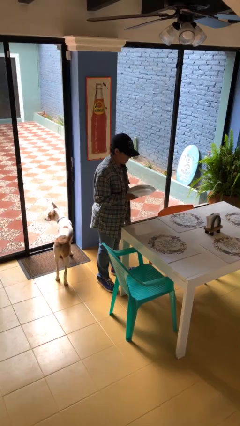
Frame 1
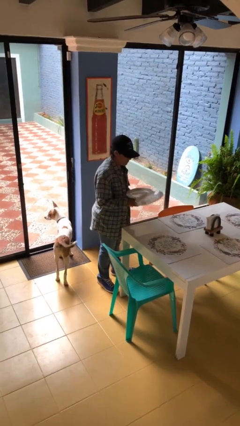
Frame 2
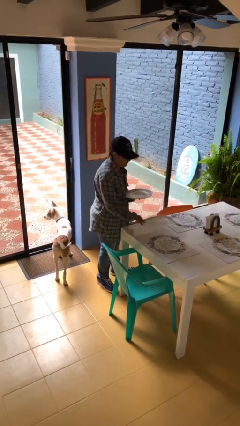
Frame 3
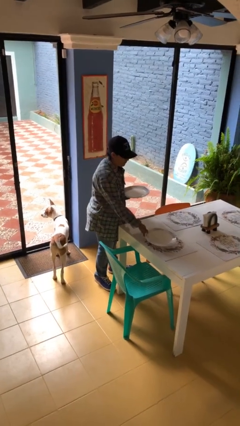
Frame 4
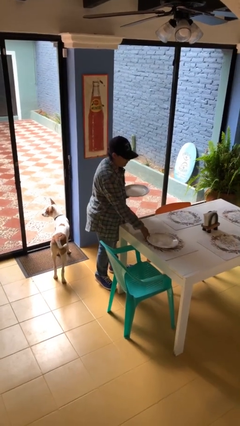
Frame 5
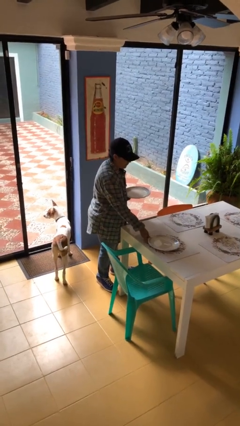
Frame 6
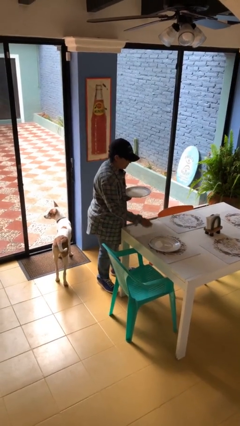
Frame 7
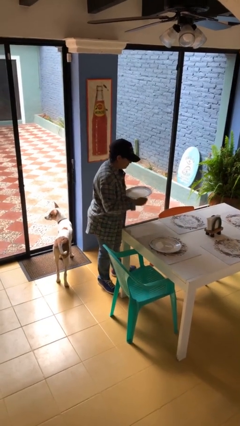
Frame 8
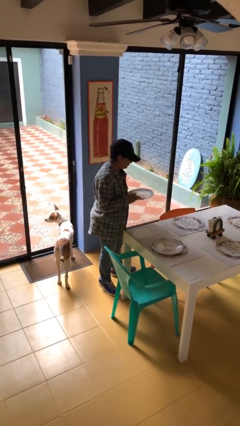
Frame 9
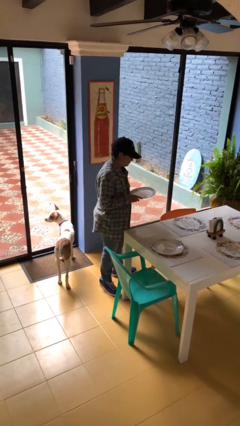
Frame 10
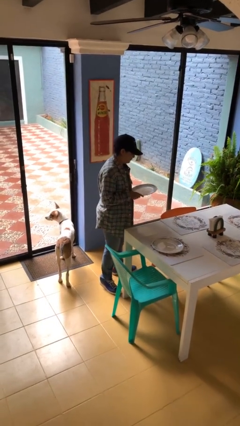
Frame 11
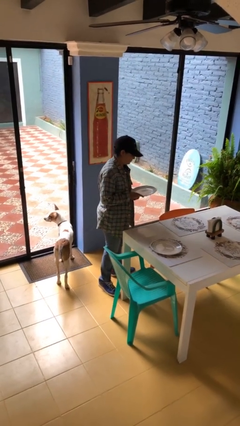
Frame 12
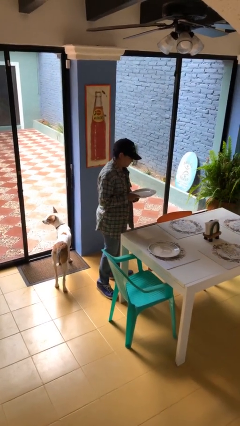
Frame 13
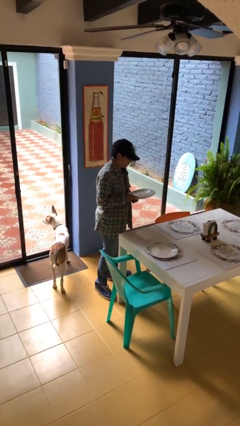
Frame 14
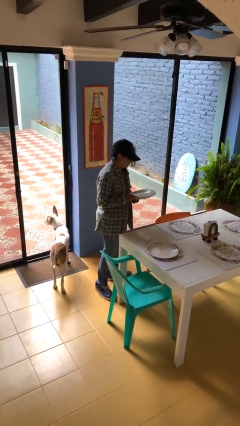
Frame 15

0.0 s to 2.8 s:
person sets table

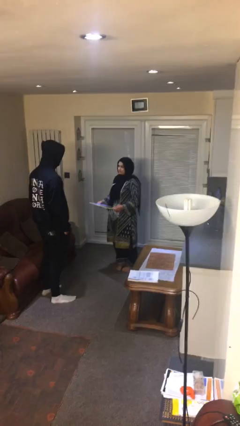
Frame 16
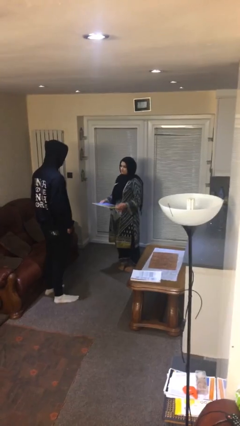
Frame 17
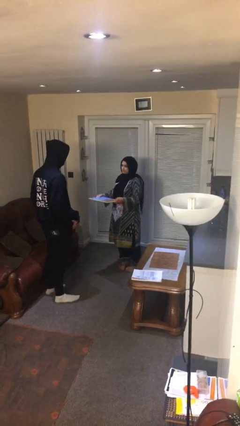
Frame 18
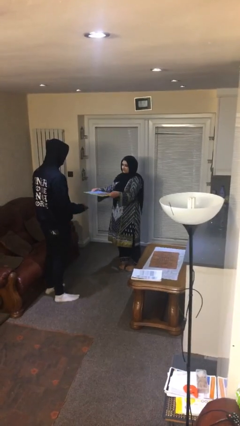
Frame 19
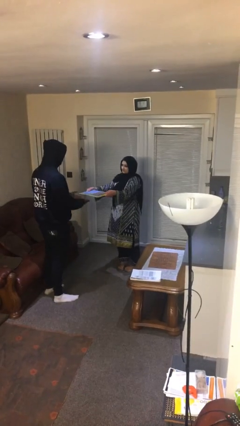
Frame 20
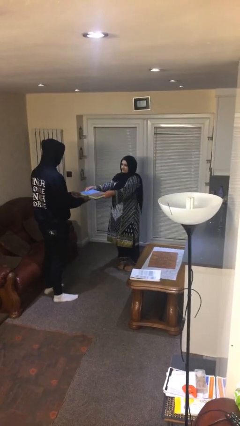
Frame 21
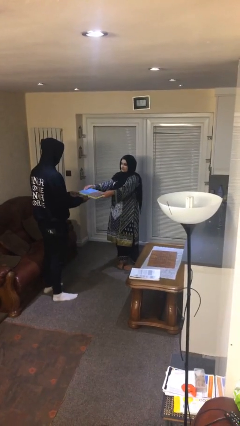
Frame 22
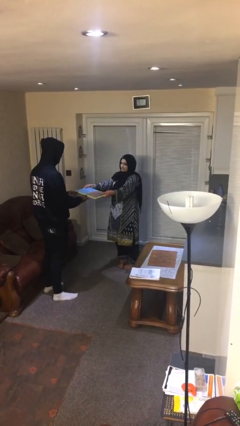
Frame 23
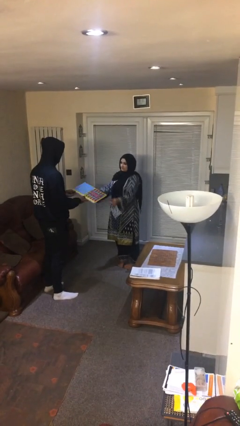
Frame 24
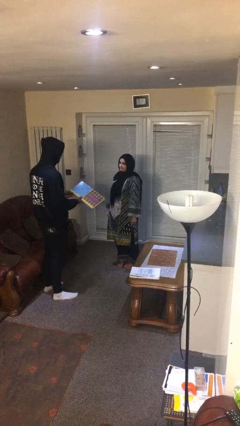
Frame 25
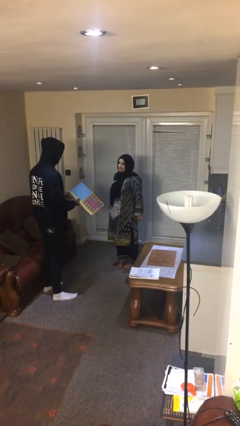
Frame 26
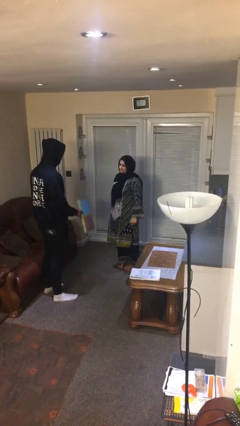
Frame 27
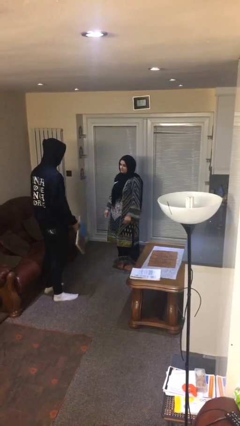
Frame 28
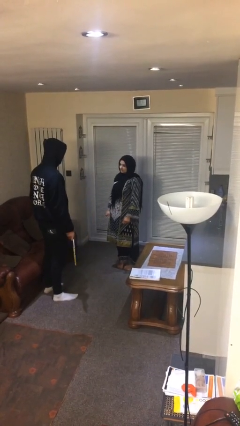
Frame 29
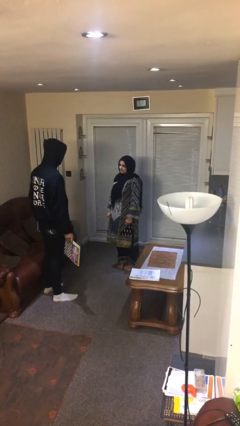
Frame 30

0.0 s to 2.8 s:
person transfers object to person

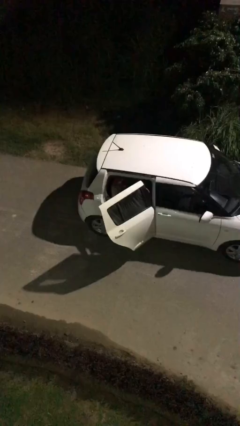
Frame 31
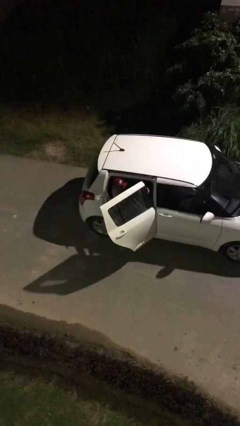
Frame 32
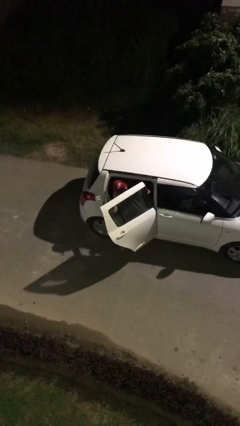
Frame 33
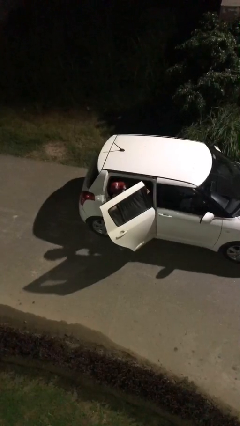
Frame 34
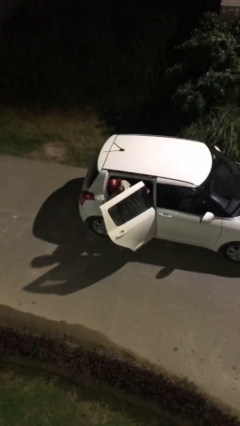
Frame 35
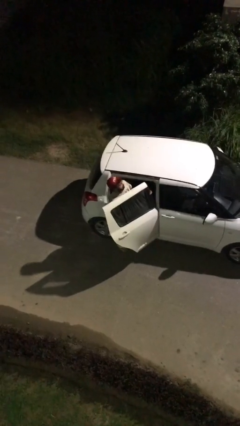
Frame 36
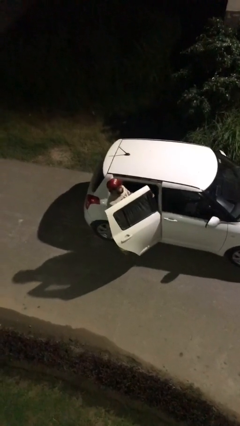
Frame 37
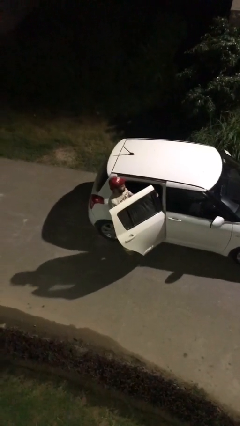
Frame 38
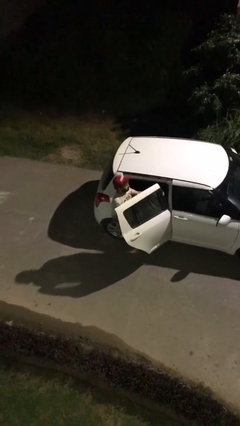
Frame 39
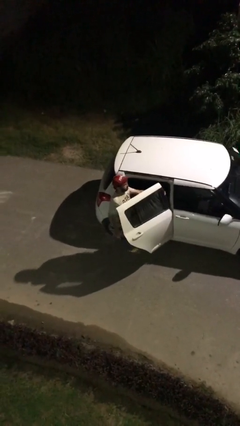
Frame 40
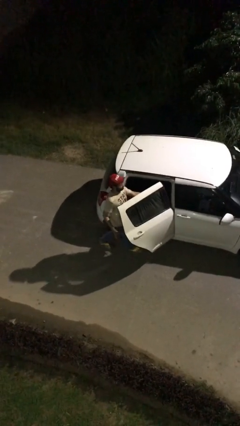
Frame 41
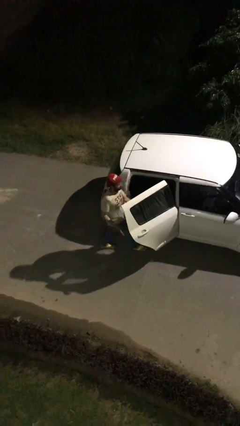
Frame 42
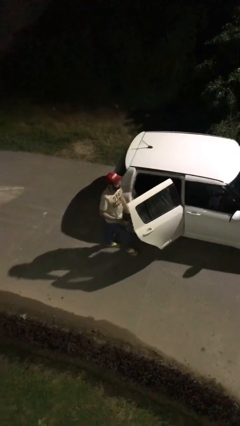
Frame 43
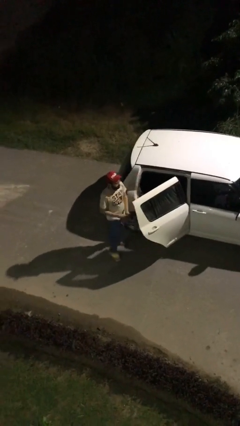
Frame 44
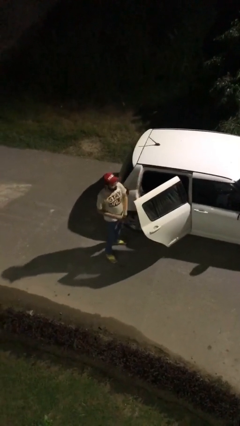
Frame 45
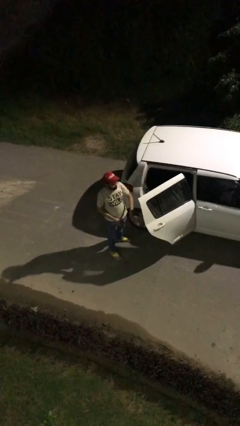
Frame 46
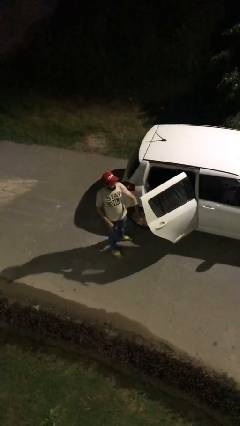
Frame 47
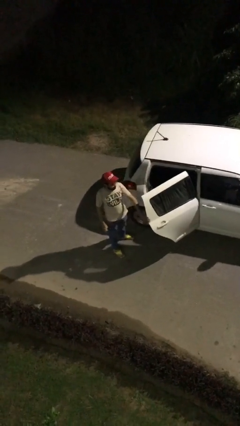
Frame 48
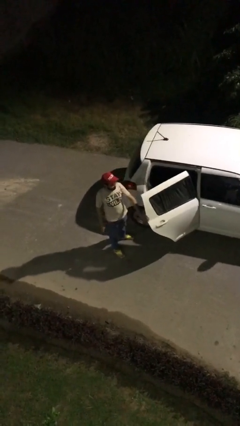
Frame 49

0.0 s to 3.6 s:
person exits car

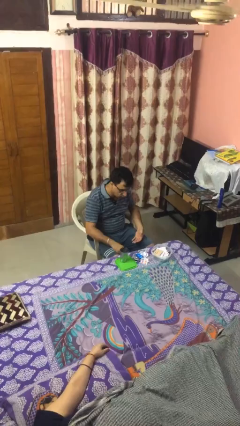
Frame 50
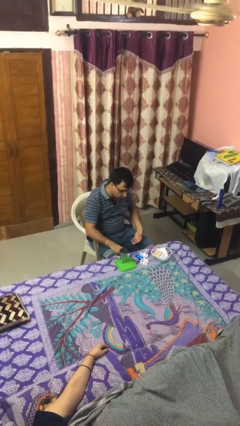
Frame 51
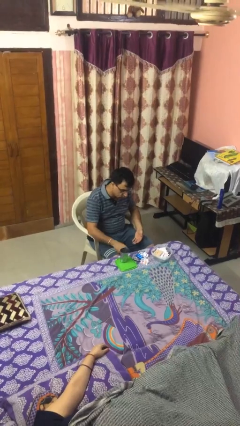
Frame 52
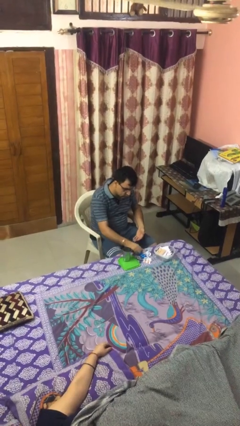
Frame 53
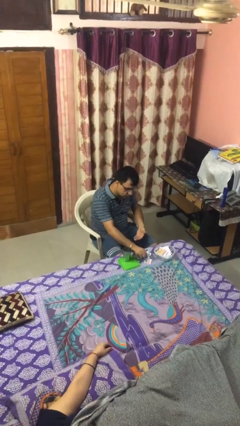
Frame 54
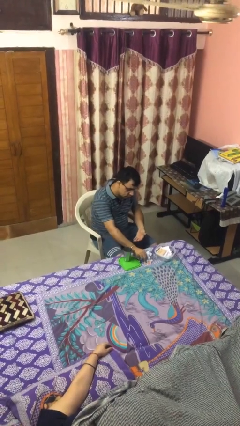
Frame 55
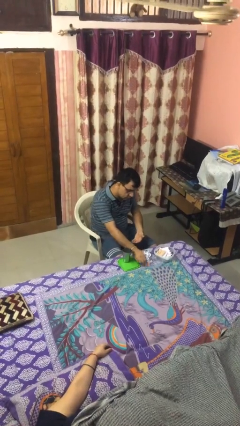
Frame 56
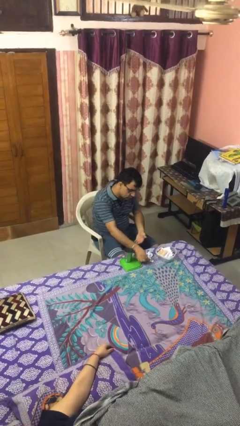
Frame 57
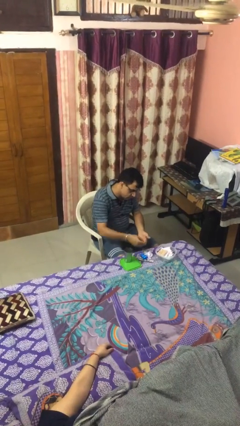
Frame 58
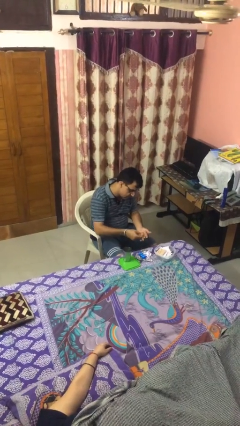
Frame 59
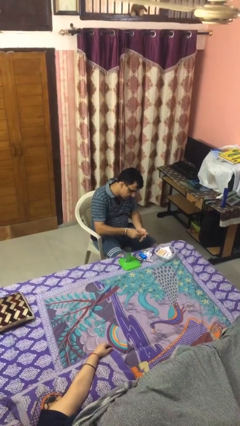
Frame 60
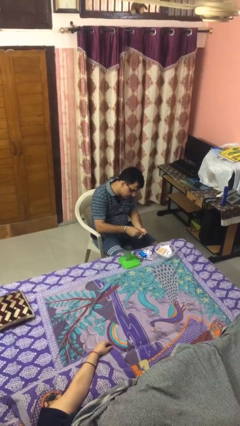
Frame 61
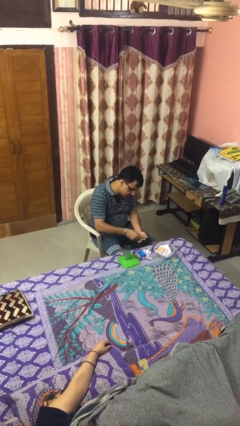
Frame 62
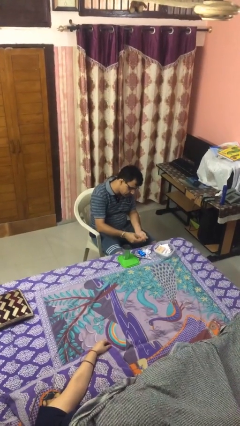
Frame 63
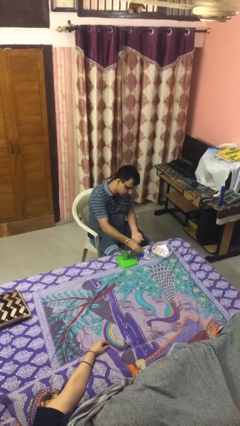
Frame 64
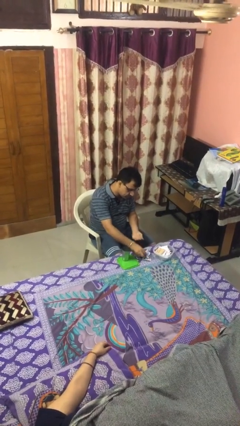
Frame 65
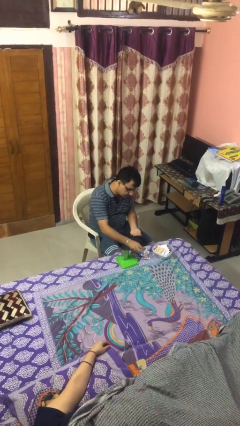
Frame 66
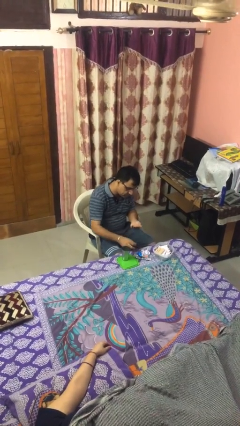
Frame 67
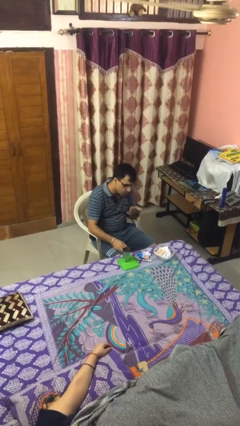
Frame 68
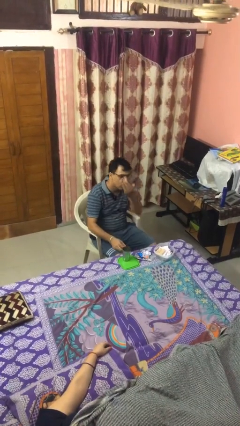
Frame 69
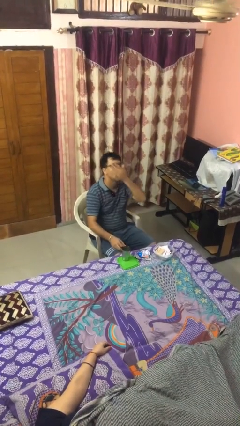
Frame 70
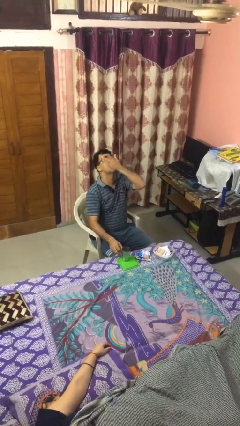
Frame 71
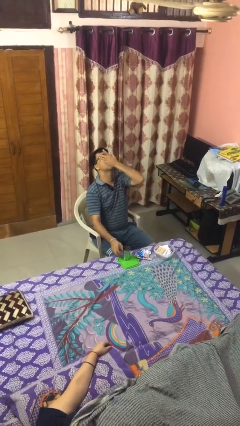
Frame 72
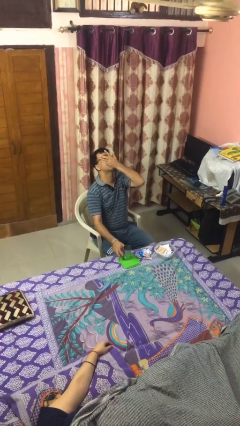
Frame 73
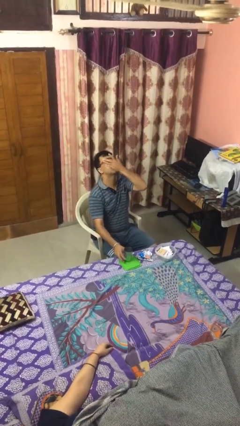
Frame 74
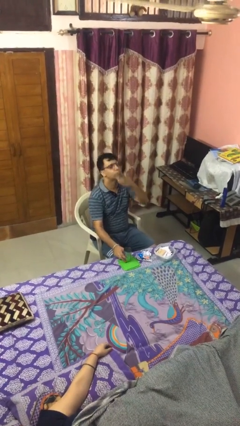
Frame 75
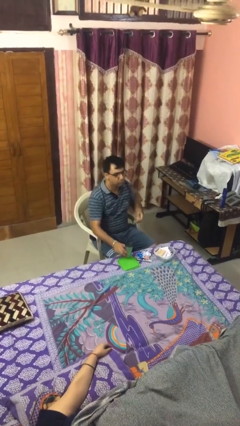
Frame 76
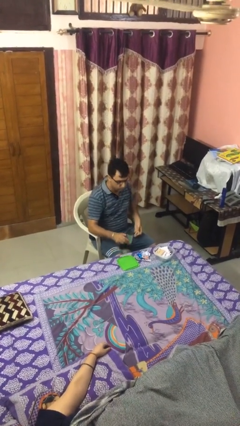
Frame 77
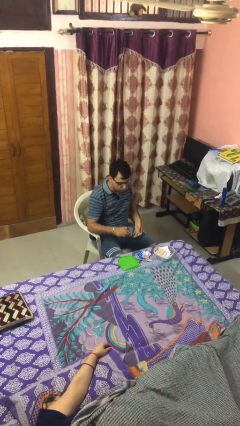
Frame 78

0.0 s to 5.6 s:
person takes medicine pills

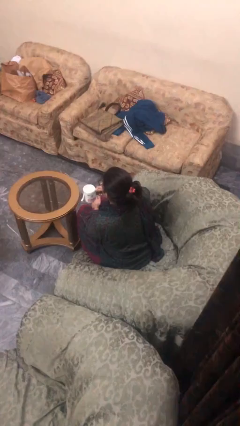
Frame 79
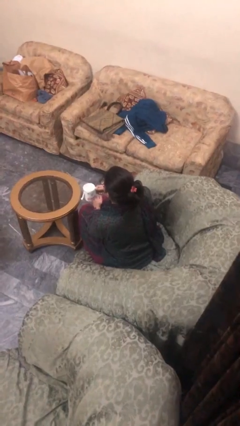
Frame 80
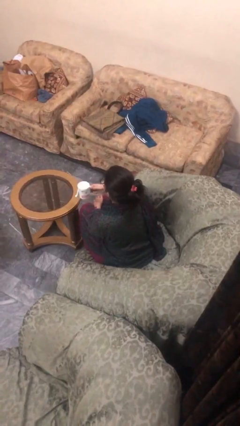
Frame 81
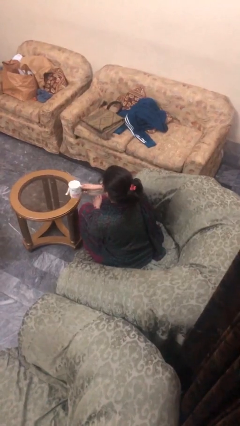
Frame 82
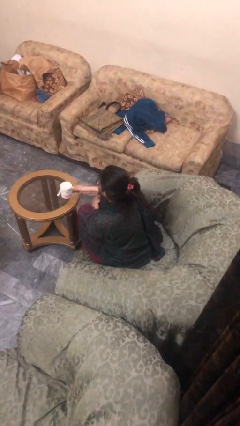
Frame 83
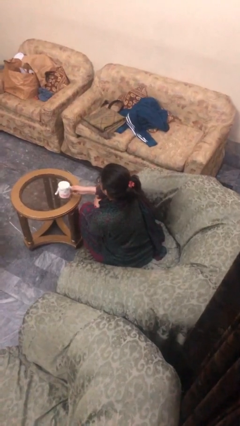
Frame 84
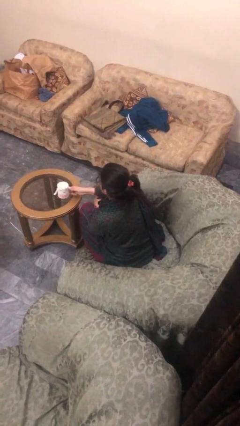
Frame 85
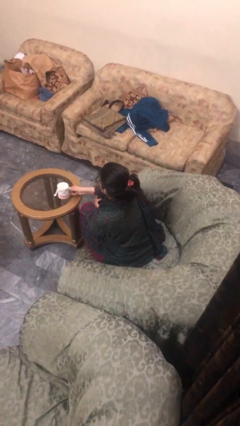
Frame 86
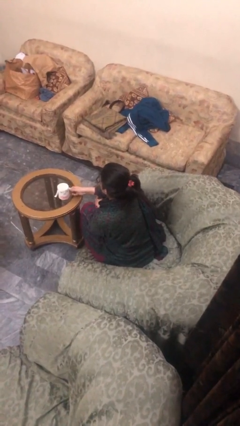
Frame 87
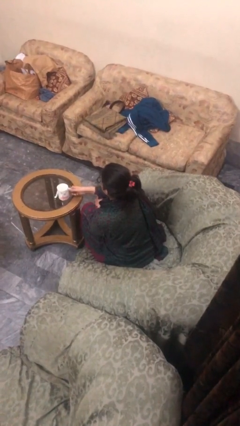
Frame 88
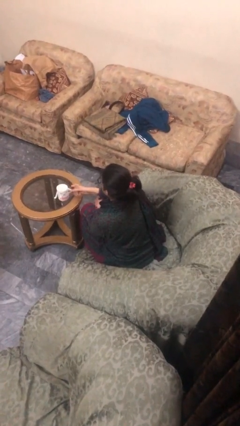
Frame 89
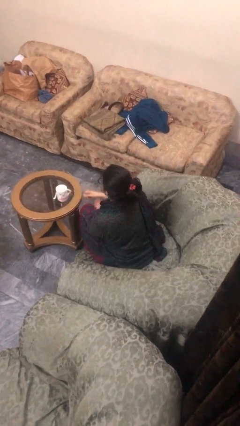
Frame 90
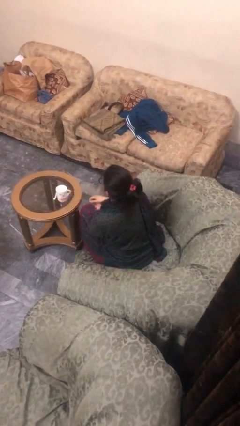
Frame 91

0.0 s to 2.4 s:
person puts down object on table
